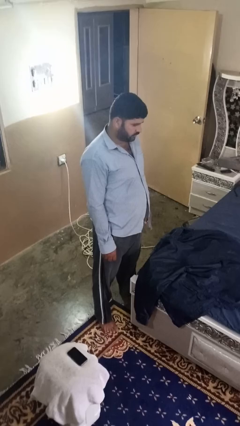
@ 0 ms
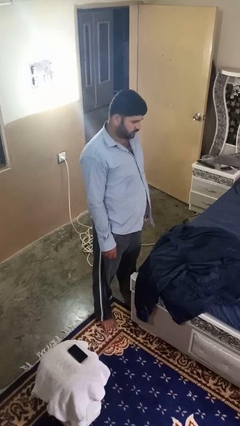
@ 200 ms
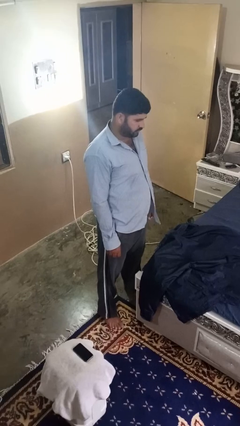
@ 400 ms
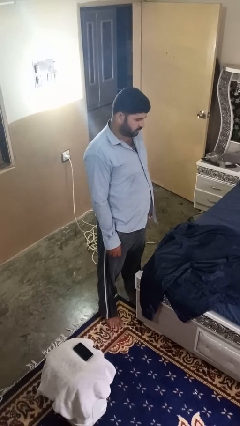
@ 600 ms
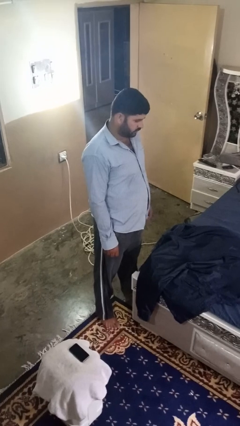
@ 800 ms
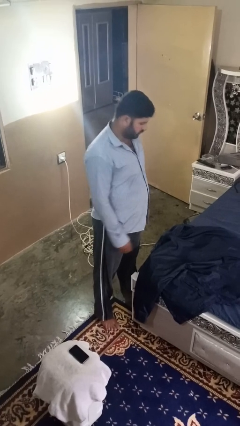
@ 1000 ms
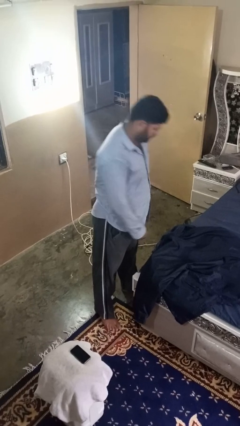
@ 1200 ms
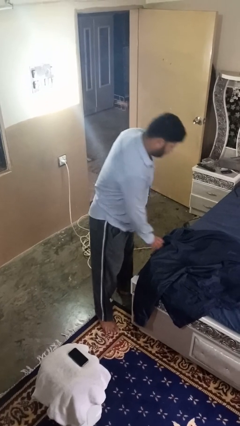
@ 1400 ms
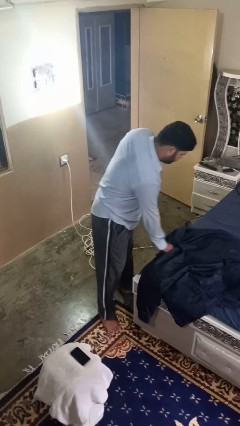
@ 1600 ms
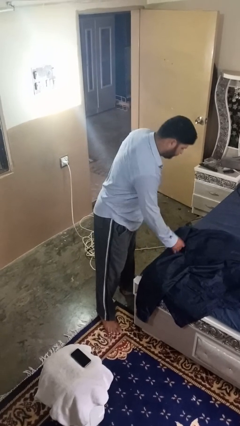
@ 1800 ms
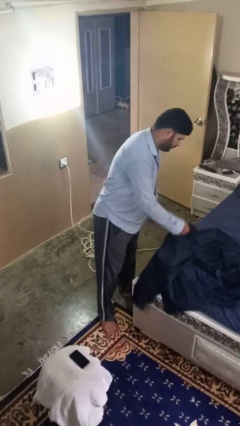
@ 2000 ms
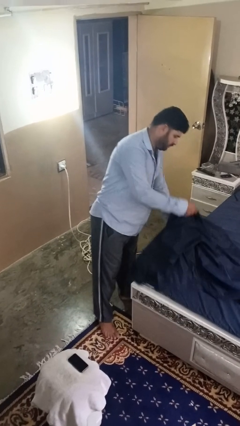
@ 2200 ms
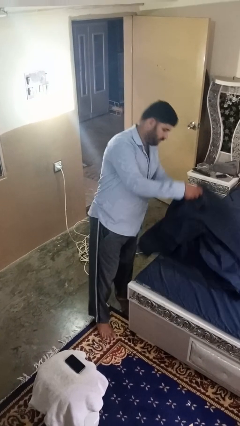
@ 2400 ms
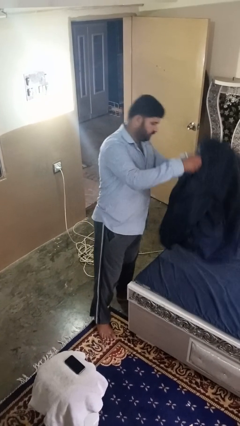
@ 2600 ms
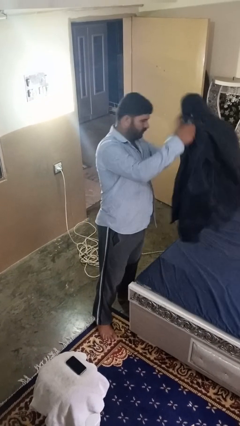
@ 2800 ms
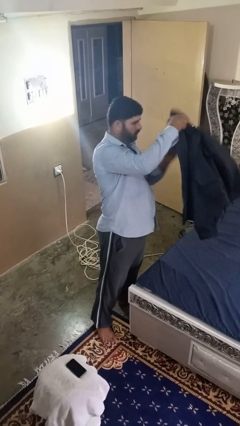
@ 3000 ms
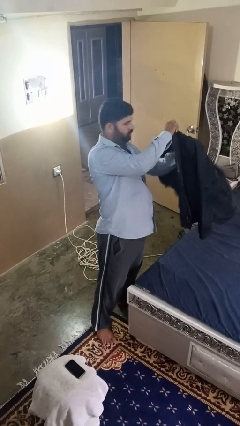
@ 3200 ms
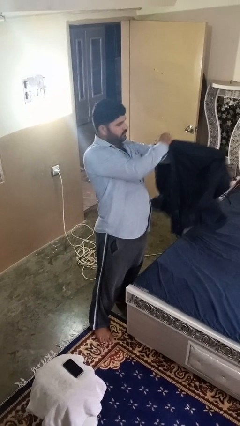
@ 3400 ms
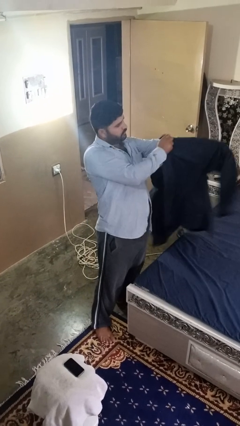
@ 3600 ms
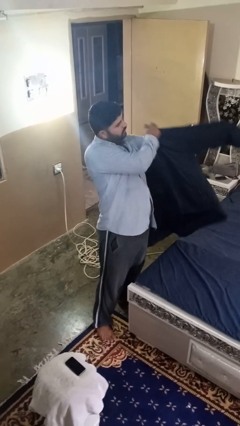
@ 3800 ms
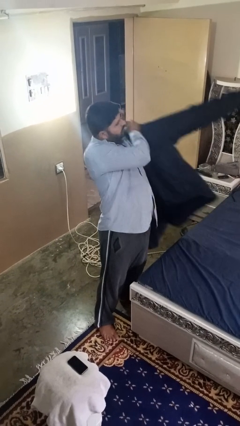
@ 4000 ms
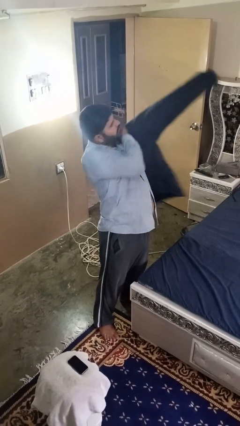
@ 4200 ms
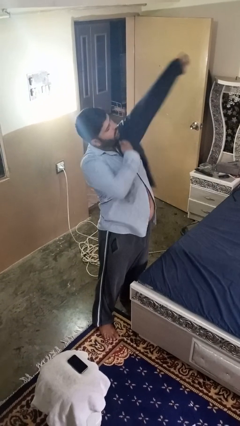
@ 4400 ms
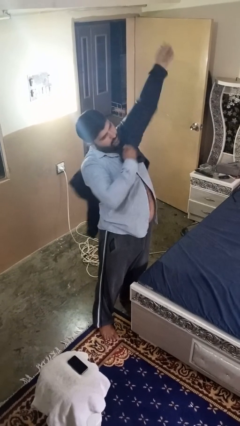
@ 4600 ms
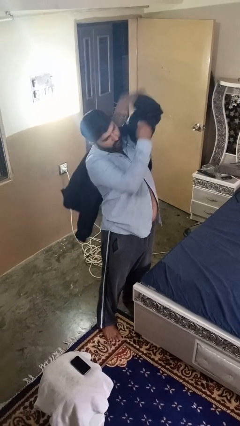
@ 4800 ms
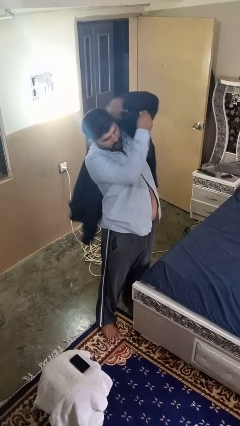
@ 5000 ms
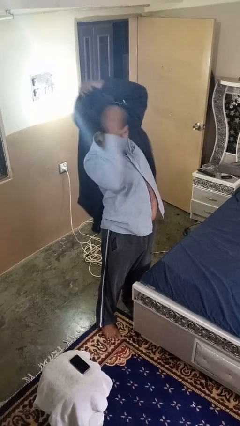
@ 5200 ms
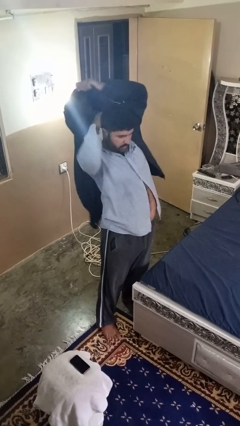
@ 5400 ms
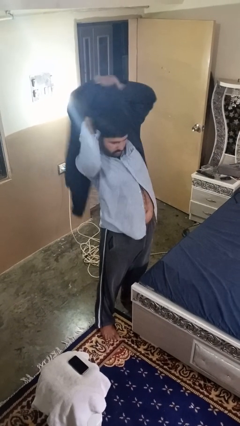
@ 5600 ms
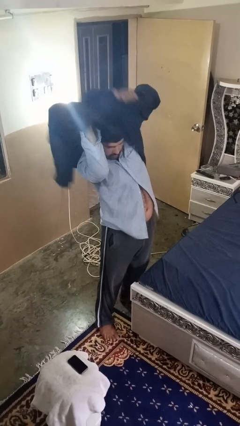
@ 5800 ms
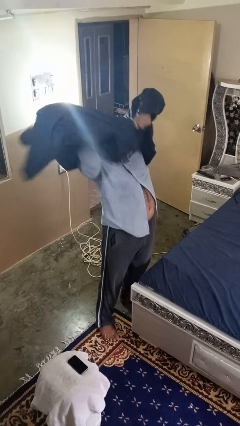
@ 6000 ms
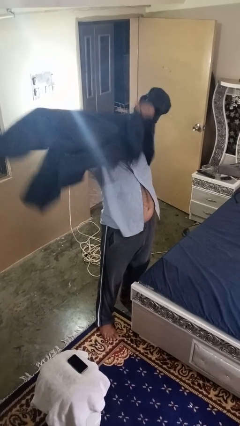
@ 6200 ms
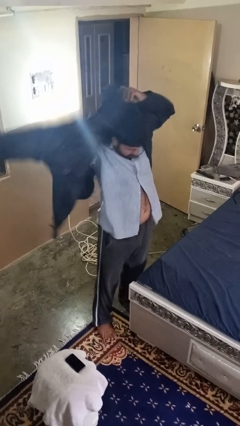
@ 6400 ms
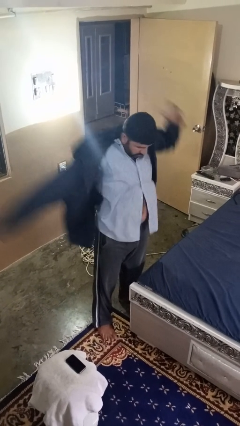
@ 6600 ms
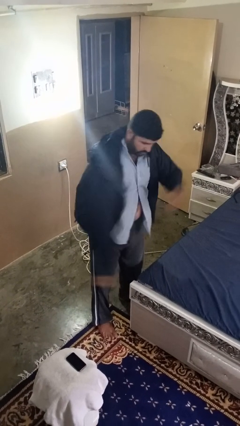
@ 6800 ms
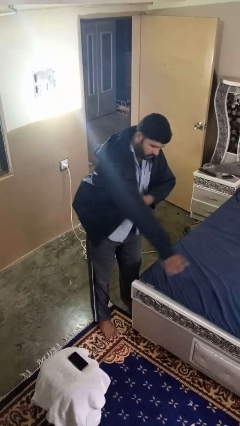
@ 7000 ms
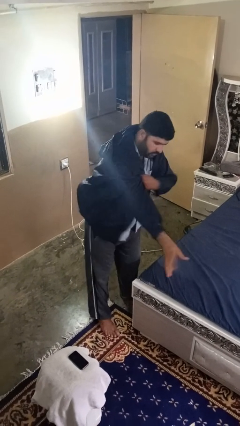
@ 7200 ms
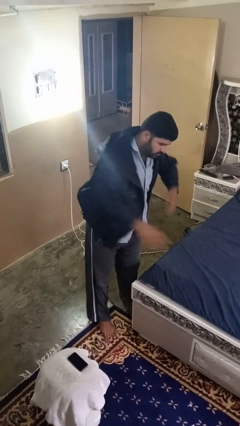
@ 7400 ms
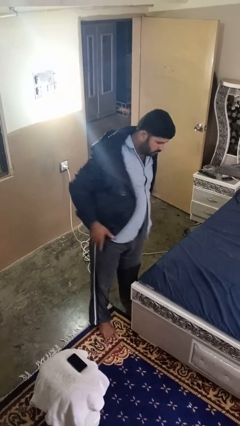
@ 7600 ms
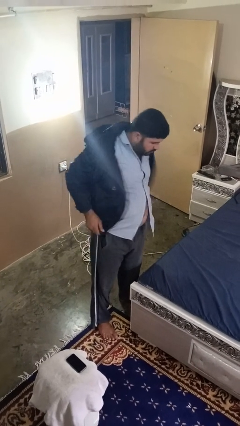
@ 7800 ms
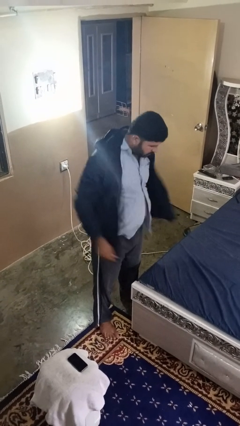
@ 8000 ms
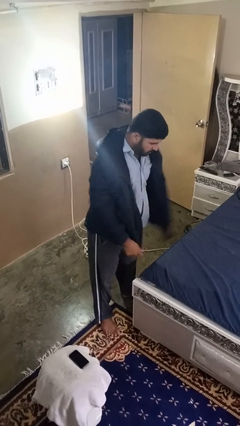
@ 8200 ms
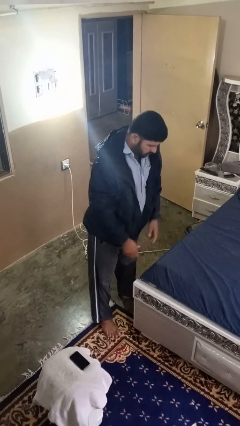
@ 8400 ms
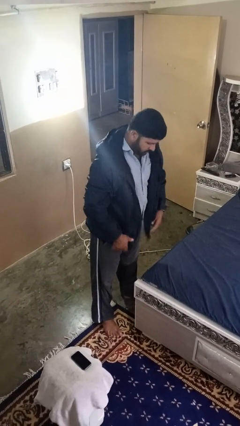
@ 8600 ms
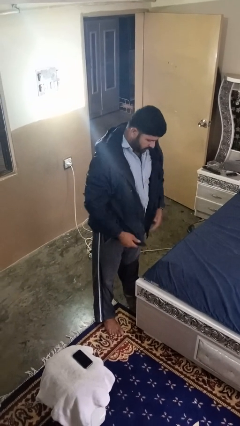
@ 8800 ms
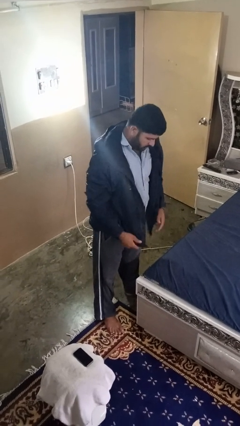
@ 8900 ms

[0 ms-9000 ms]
person puts on jacket

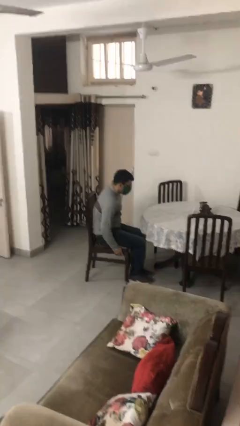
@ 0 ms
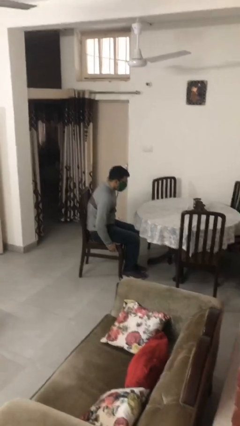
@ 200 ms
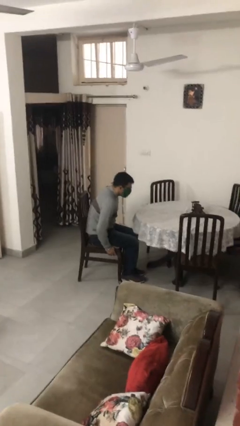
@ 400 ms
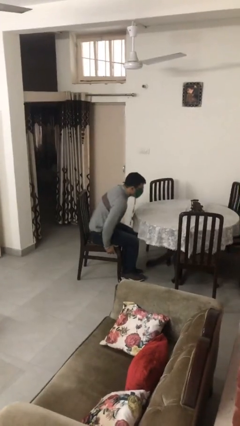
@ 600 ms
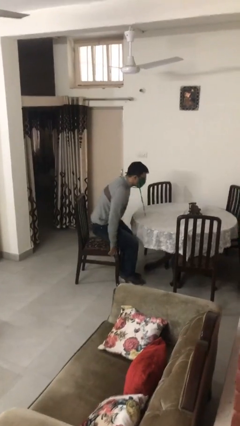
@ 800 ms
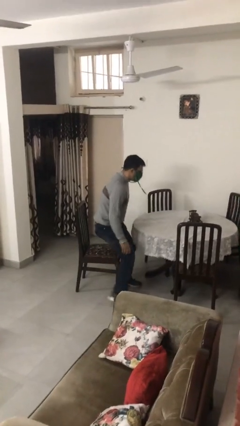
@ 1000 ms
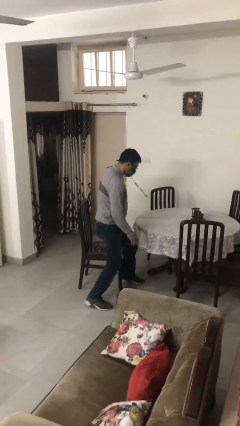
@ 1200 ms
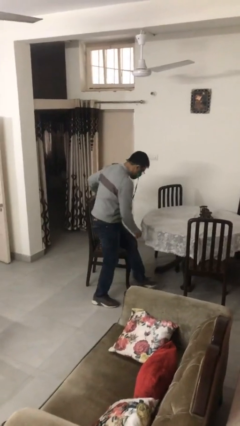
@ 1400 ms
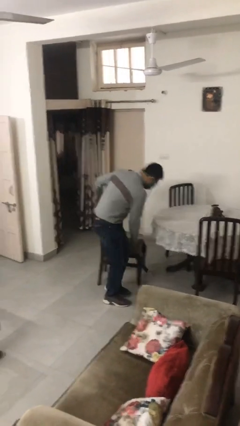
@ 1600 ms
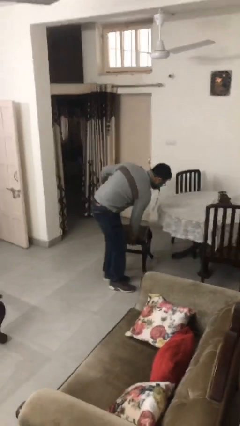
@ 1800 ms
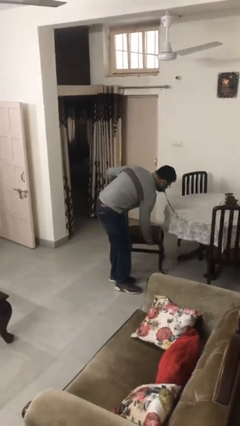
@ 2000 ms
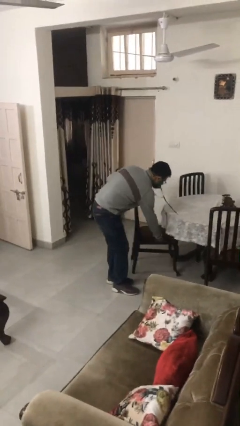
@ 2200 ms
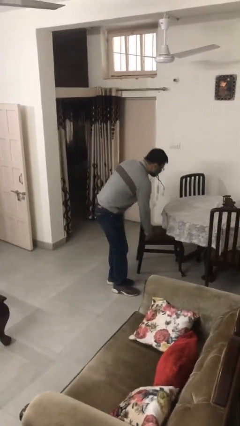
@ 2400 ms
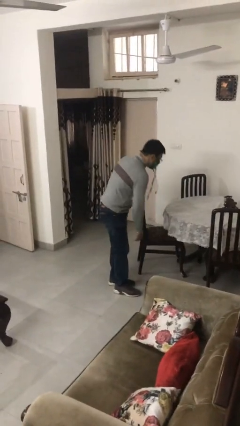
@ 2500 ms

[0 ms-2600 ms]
person stands up

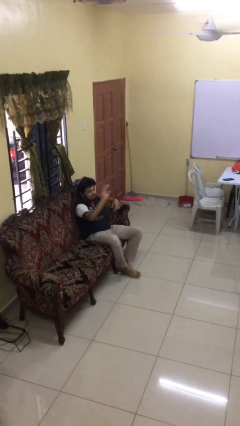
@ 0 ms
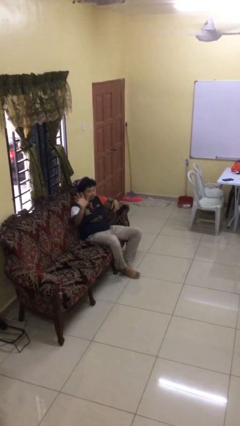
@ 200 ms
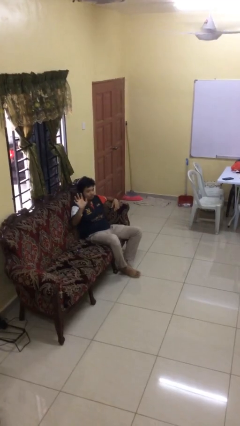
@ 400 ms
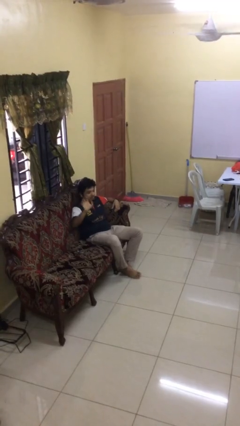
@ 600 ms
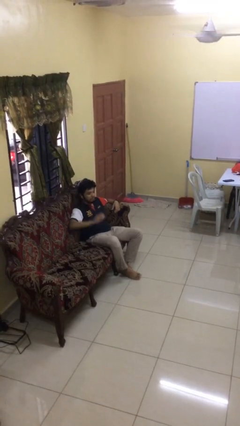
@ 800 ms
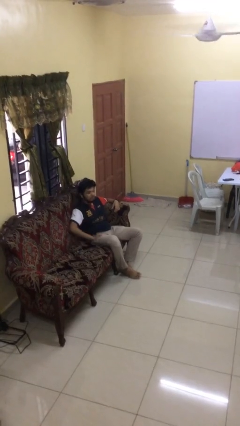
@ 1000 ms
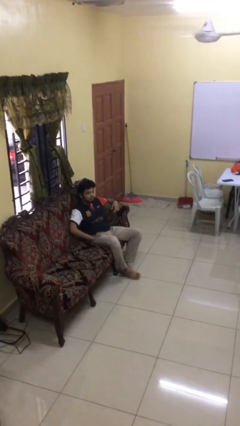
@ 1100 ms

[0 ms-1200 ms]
person gestures swipe right

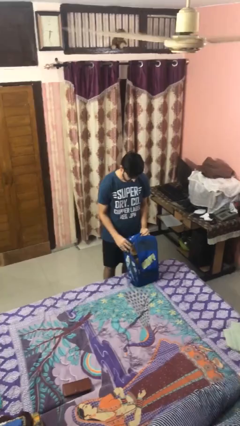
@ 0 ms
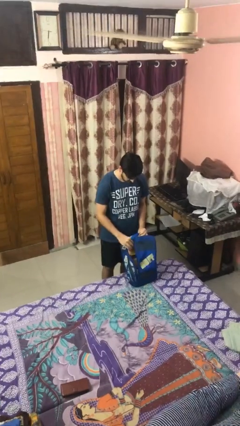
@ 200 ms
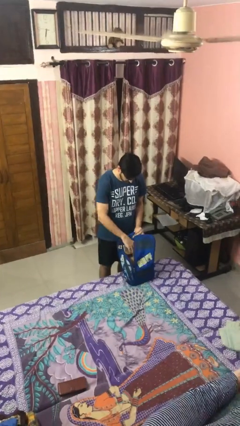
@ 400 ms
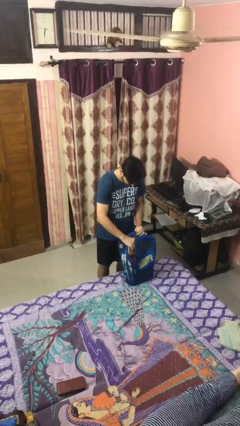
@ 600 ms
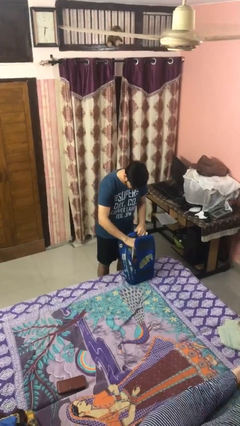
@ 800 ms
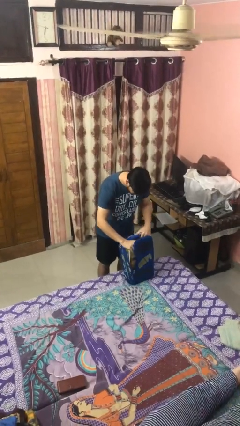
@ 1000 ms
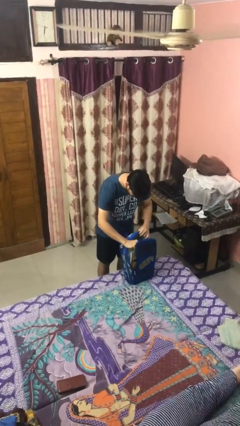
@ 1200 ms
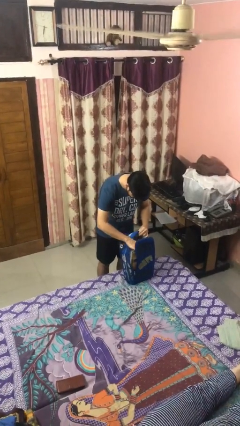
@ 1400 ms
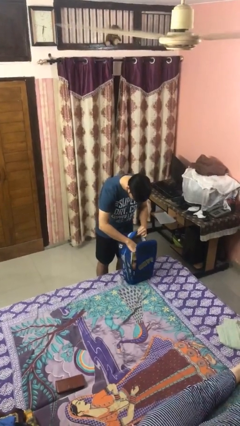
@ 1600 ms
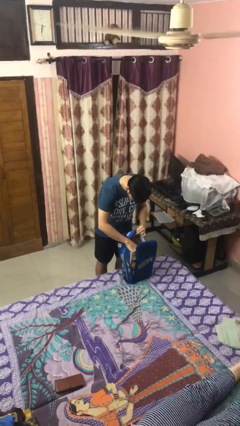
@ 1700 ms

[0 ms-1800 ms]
person searches in purse

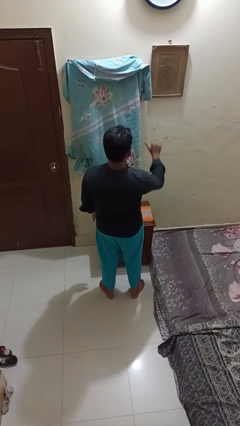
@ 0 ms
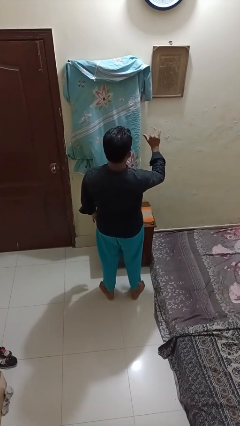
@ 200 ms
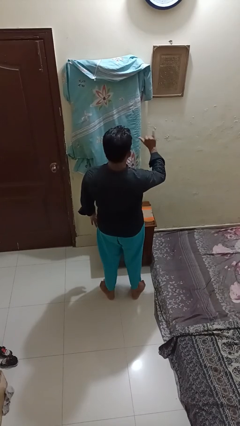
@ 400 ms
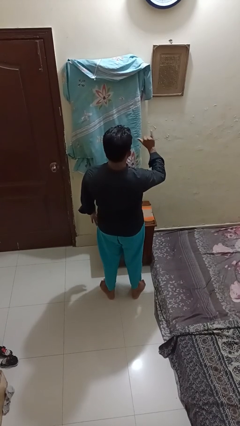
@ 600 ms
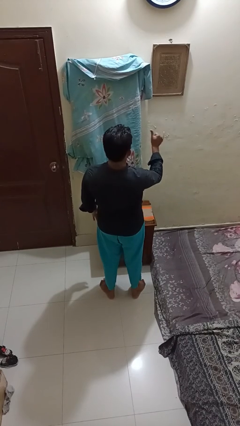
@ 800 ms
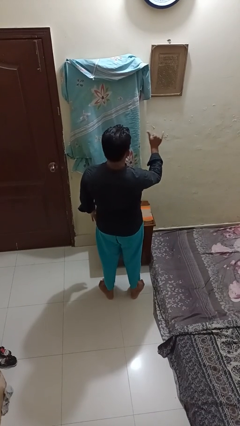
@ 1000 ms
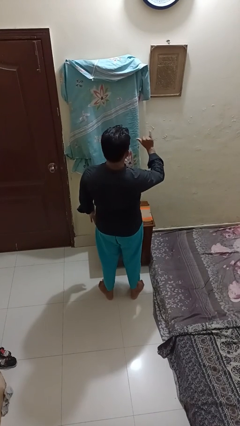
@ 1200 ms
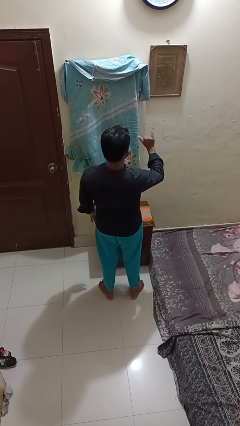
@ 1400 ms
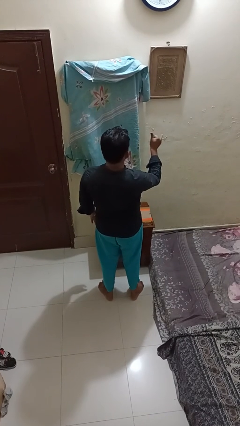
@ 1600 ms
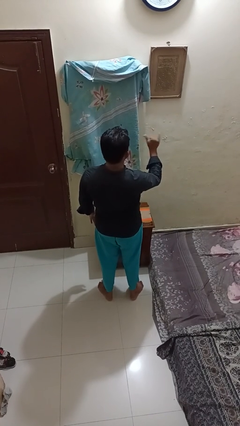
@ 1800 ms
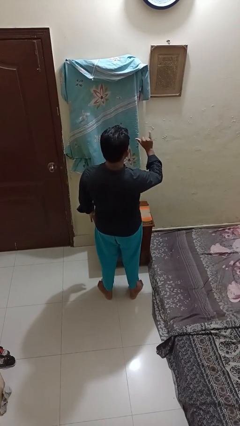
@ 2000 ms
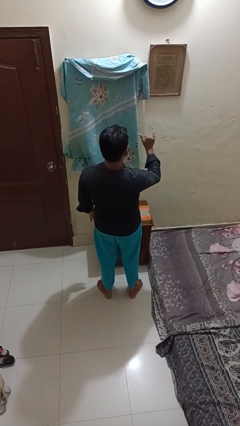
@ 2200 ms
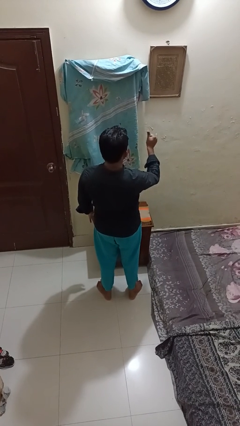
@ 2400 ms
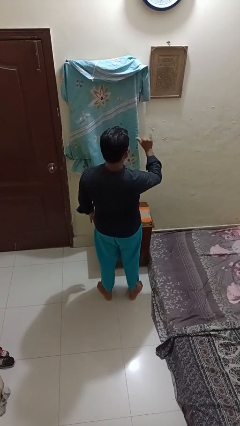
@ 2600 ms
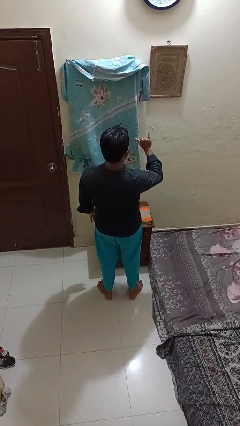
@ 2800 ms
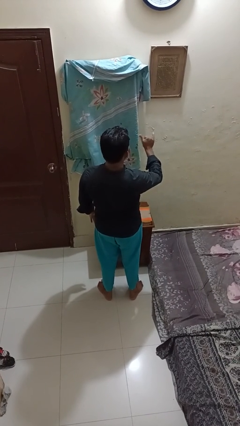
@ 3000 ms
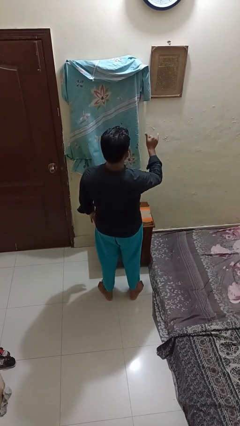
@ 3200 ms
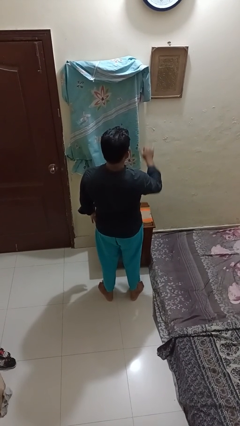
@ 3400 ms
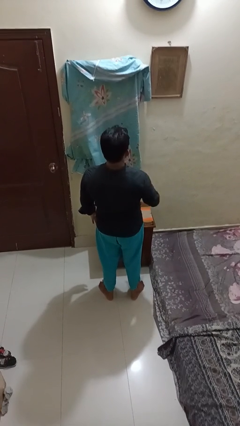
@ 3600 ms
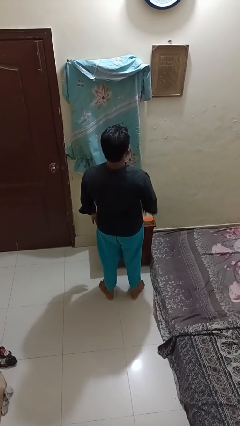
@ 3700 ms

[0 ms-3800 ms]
person gestures hang loose
